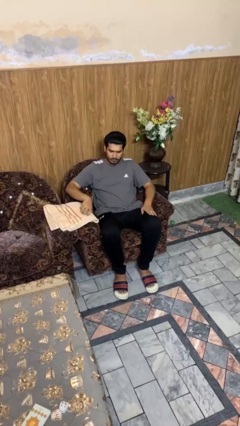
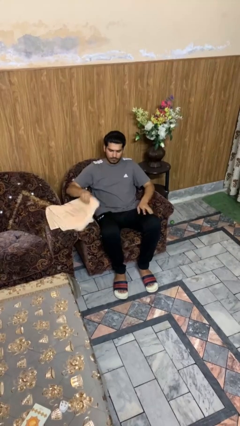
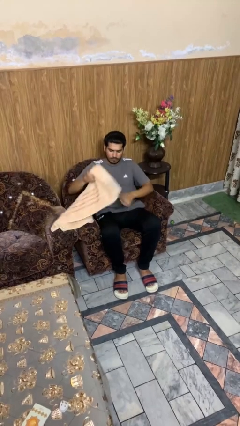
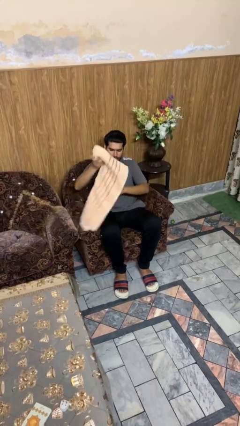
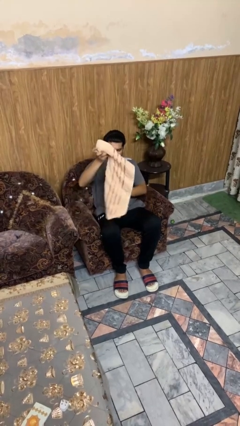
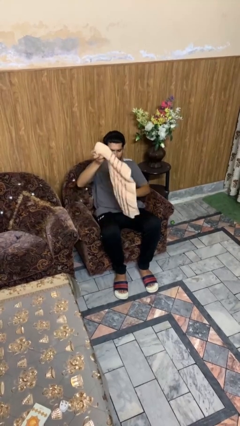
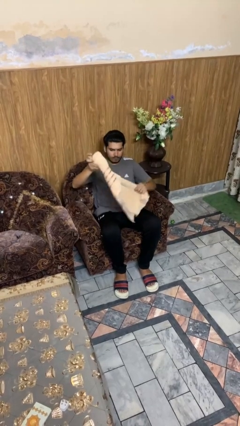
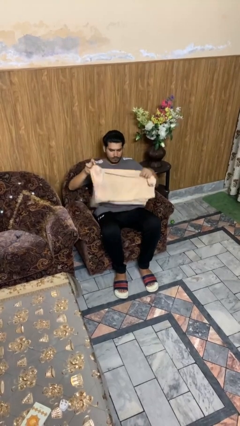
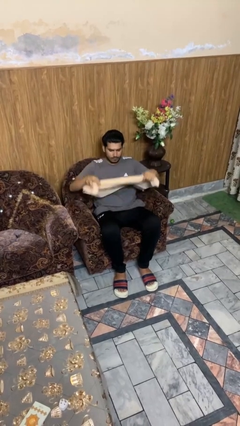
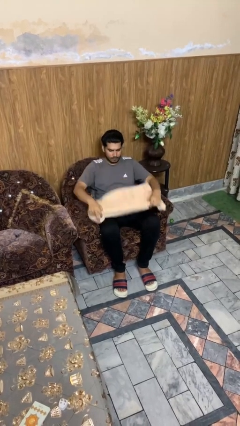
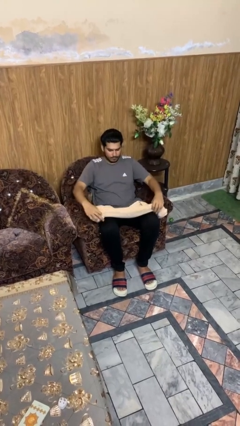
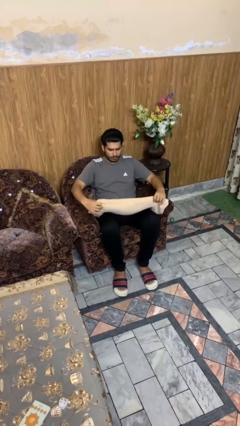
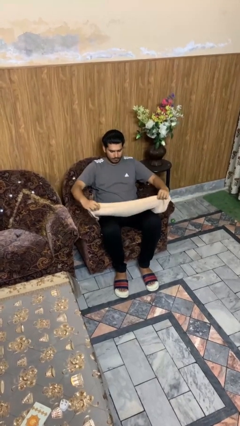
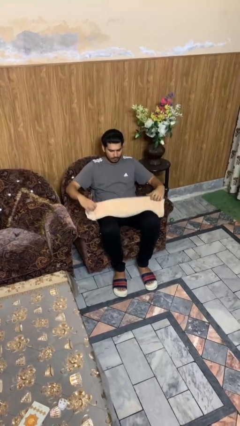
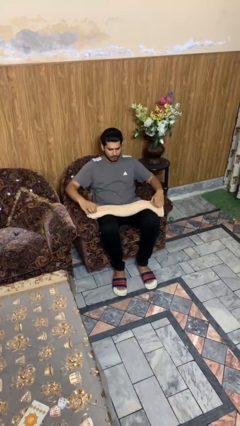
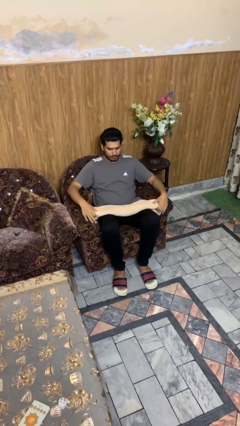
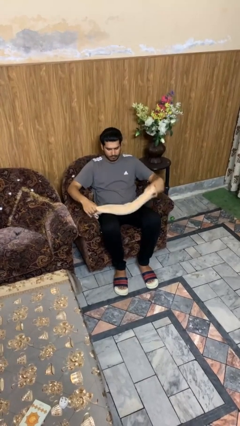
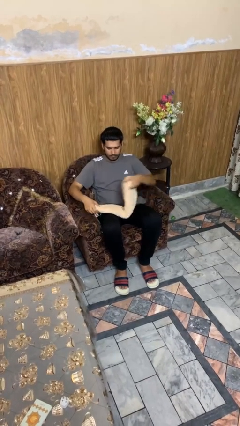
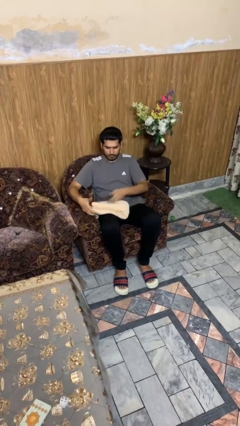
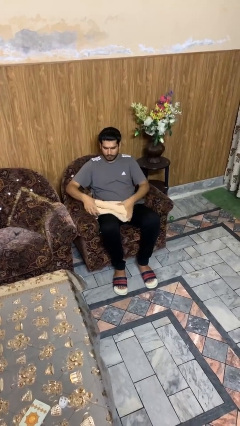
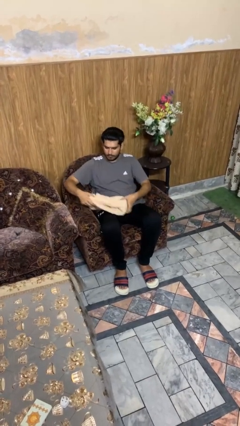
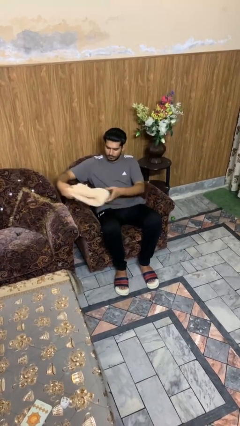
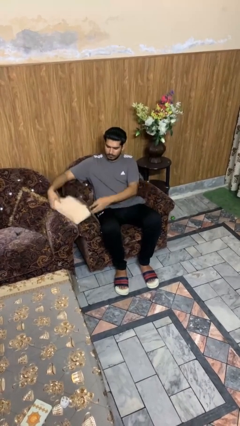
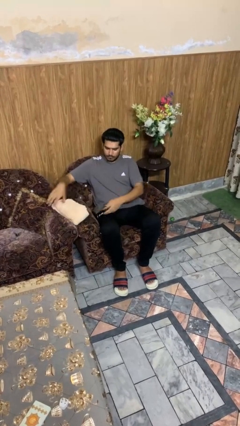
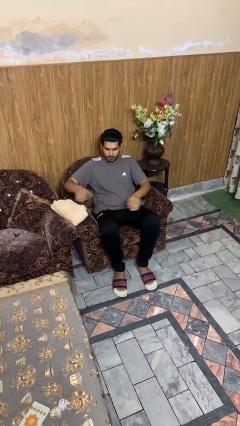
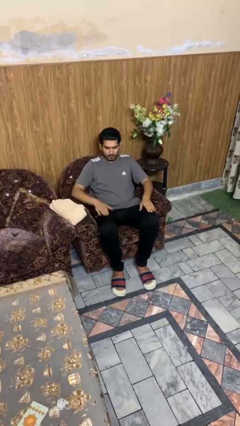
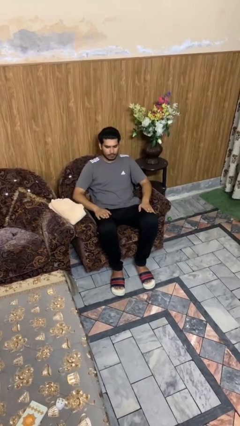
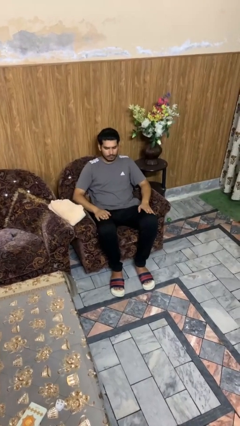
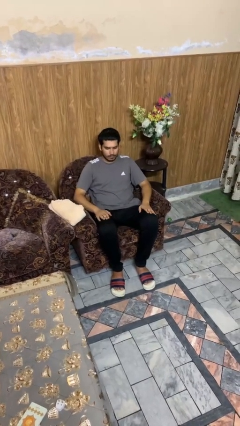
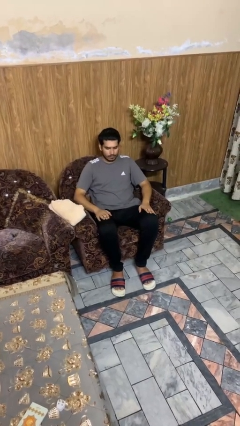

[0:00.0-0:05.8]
person folds towel

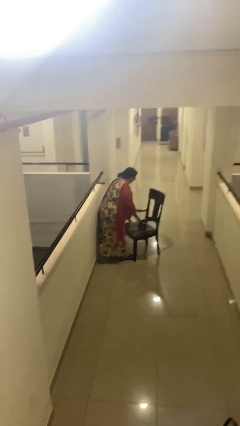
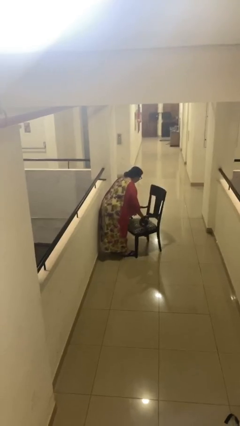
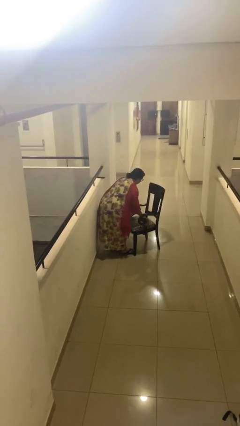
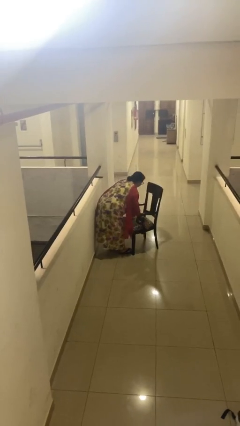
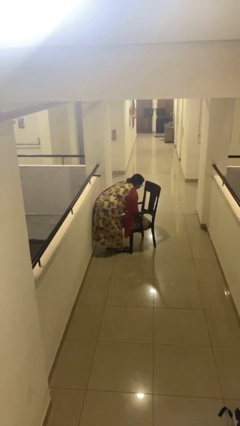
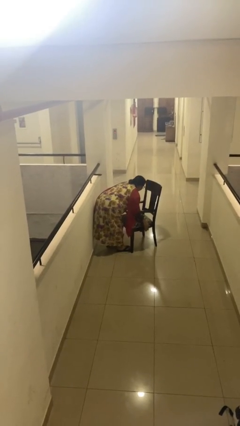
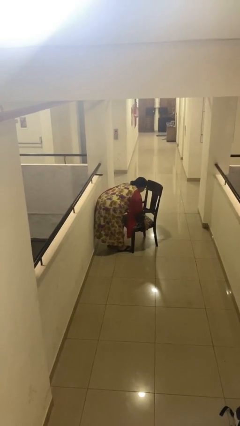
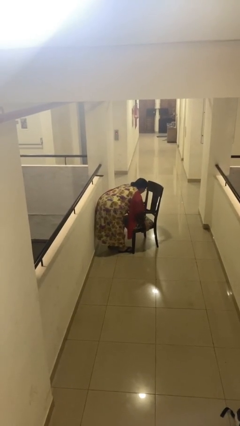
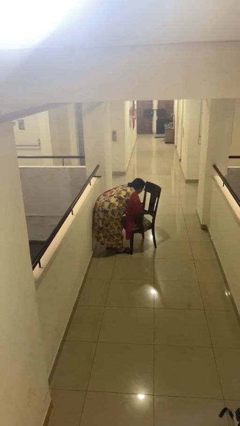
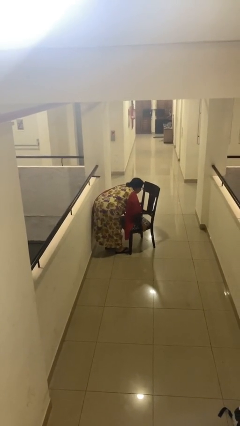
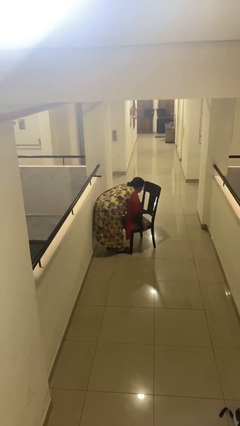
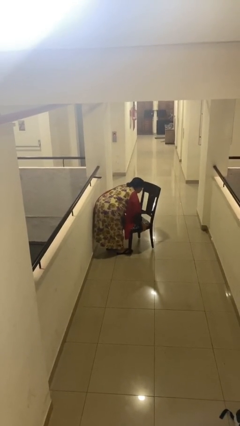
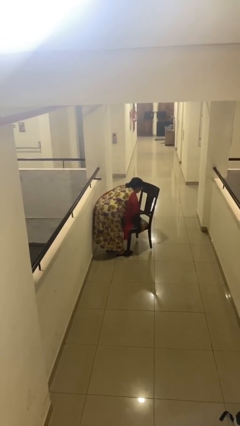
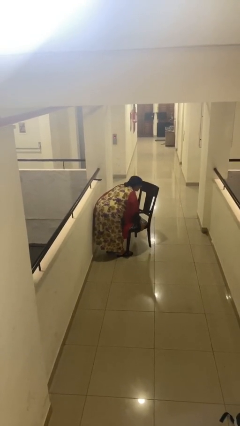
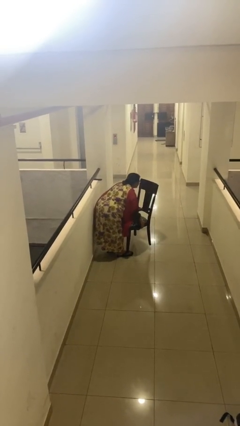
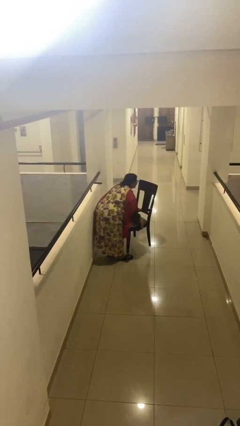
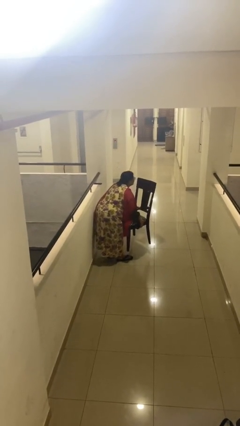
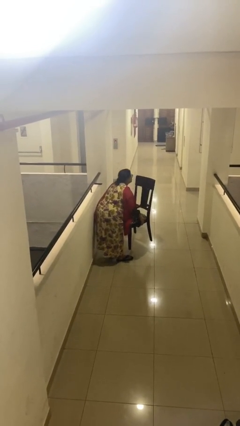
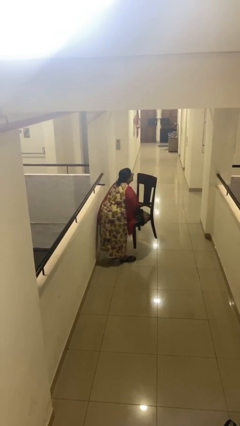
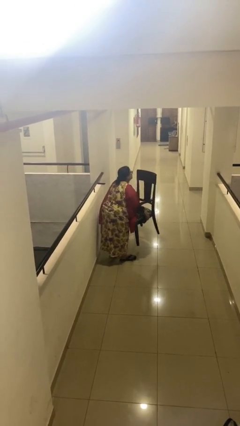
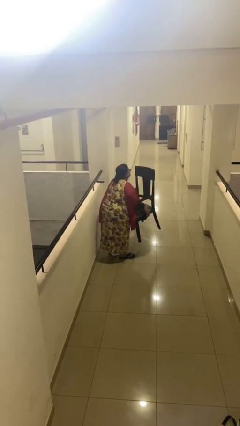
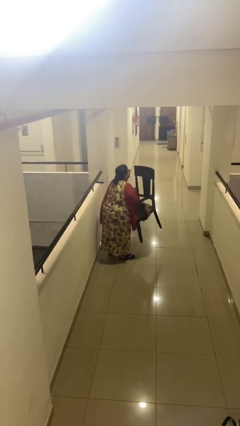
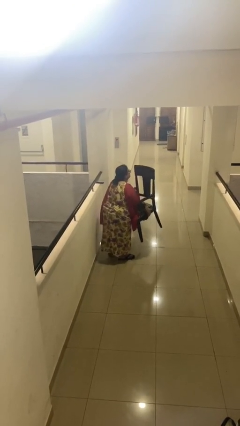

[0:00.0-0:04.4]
person picks up object from floor

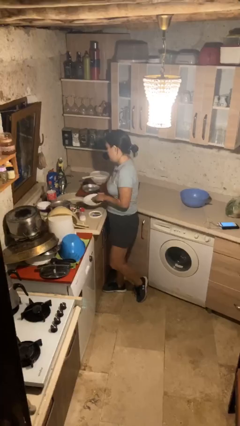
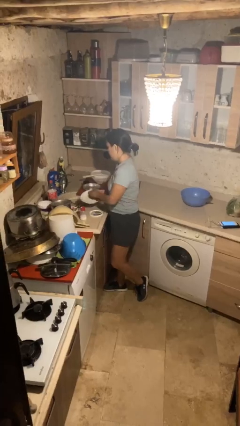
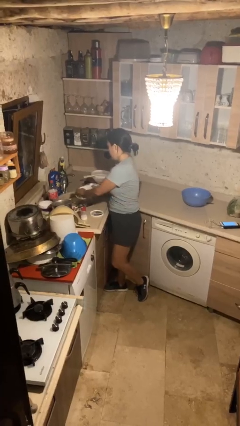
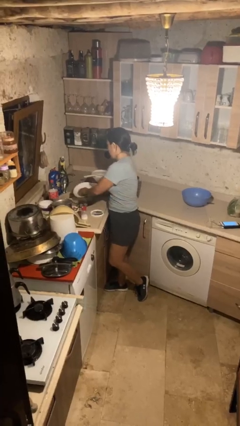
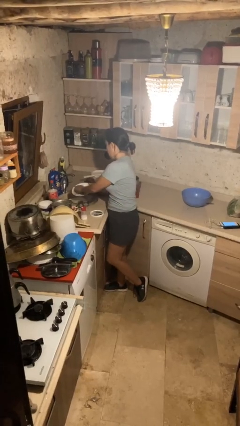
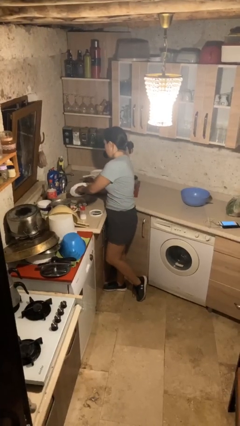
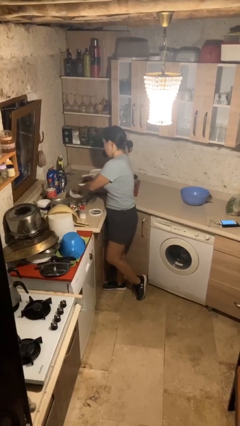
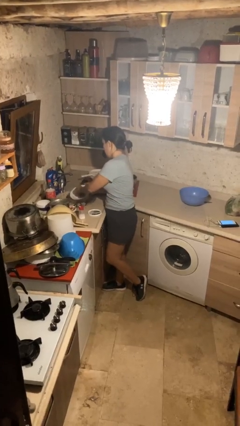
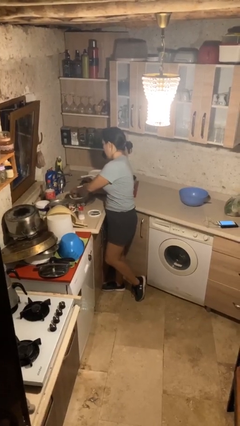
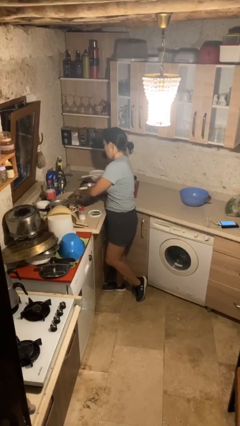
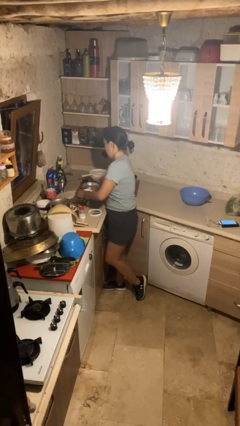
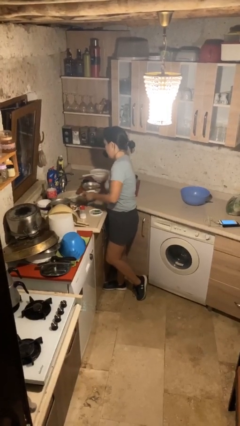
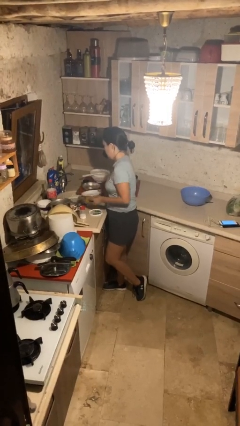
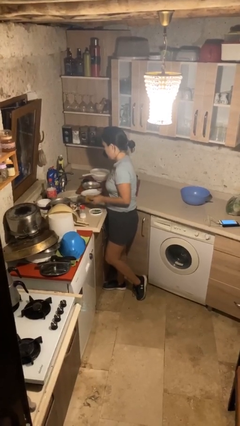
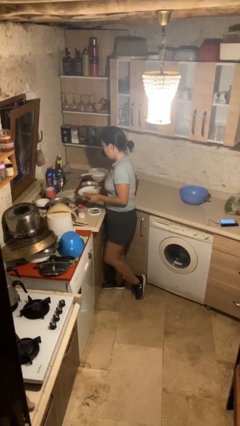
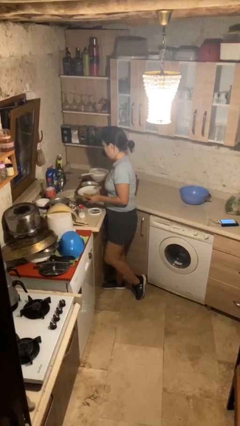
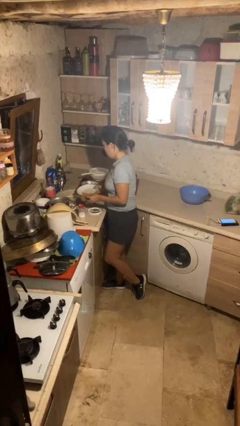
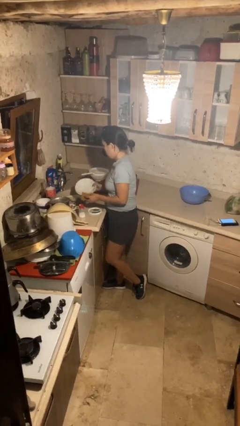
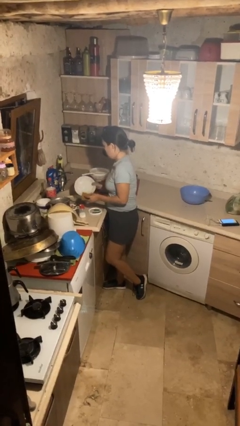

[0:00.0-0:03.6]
person washes dish

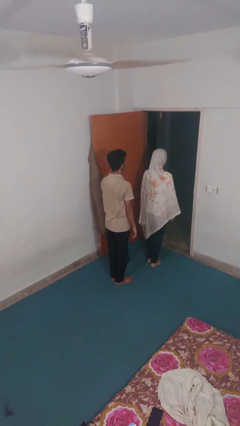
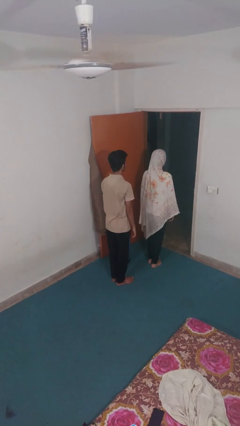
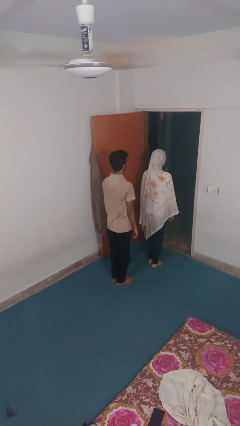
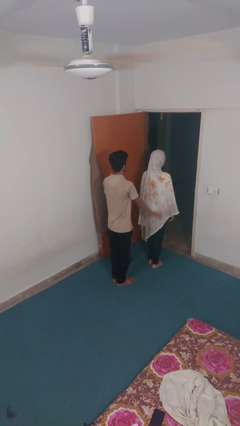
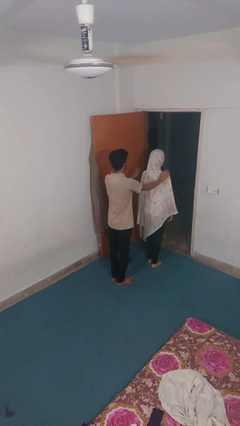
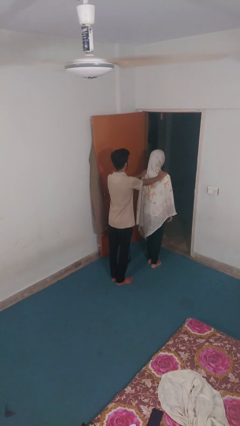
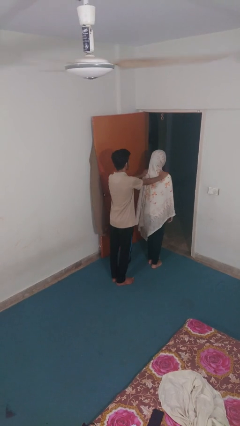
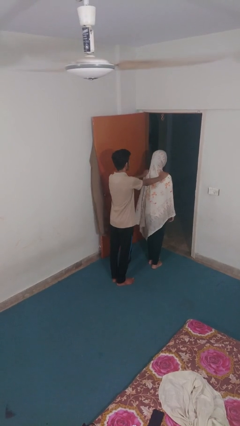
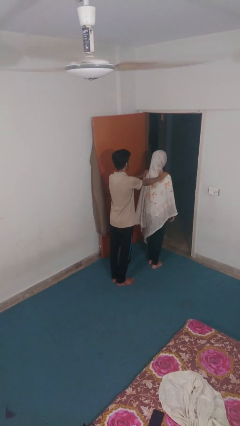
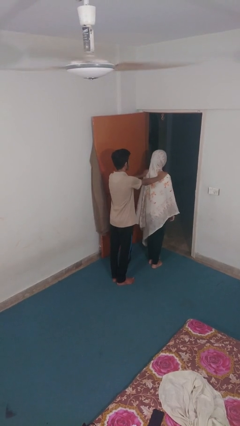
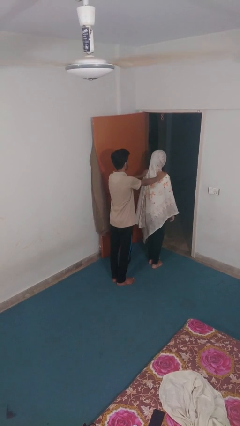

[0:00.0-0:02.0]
person grabs person by shoulder

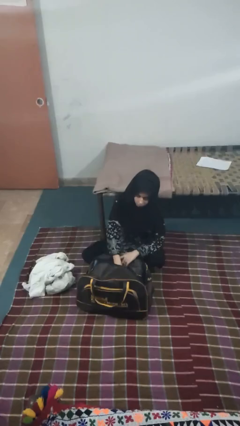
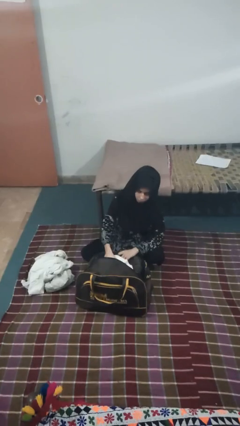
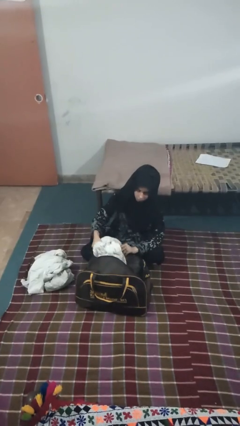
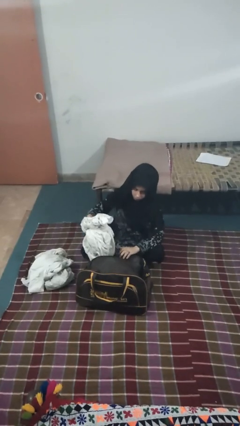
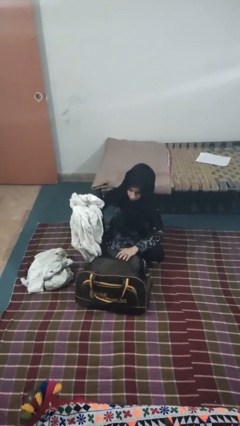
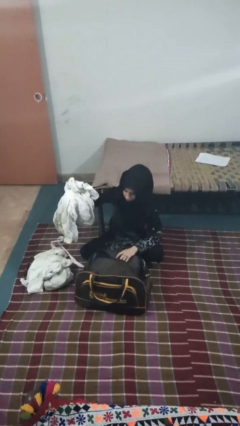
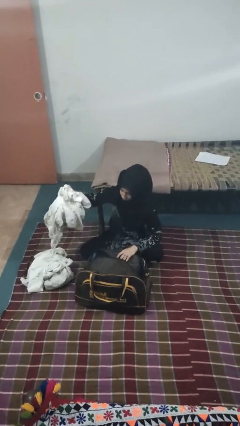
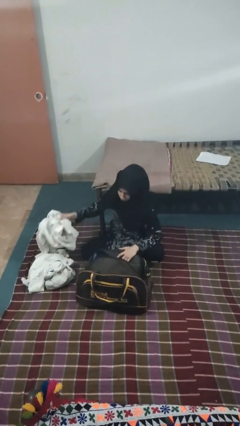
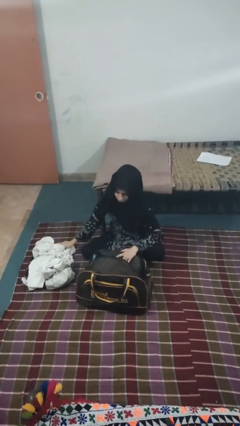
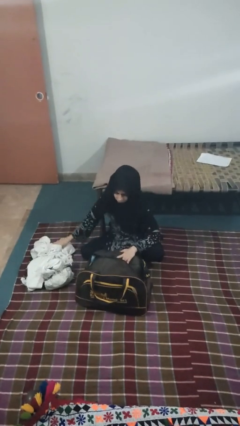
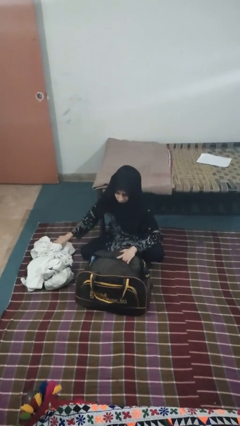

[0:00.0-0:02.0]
person unloads clothes from suitcase
